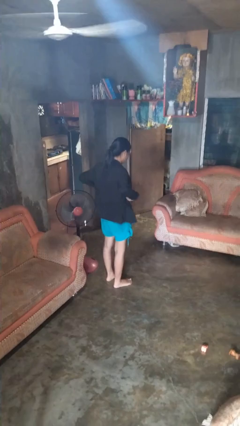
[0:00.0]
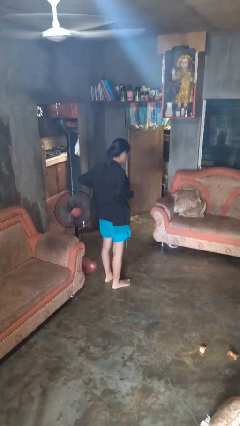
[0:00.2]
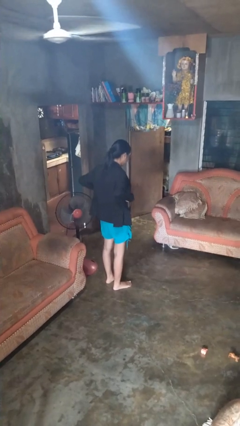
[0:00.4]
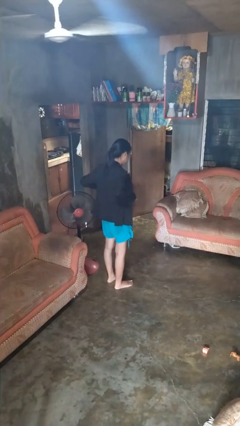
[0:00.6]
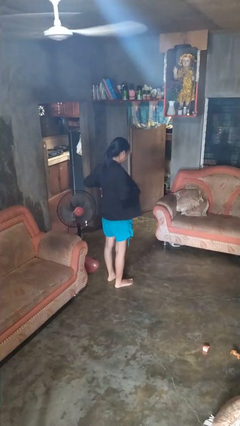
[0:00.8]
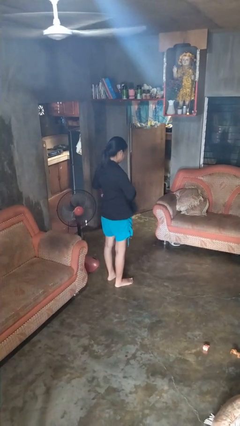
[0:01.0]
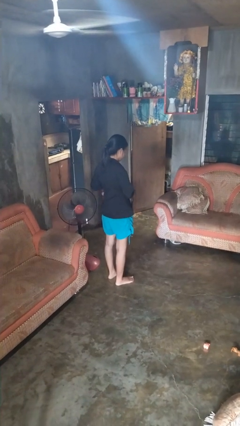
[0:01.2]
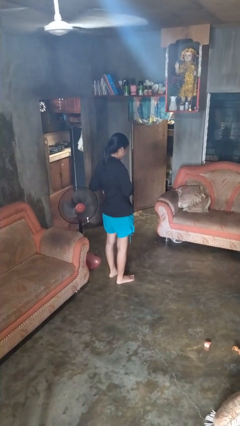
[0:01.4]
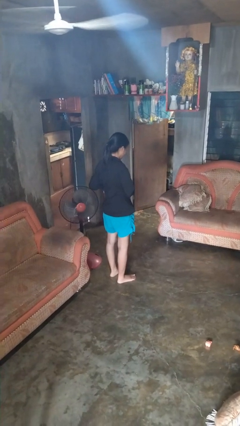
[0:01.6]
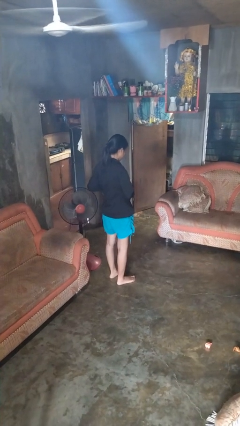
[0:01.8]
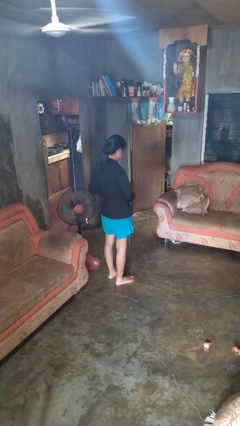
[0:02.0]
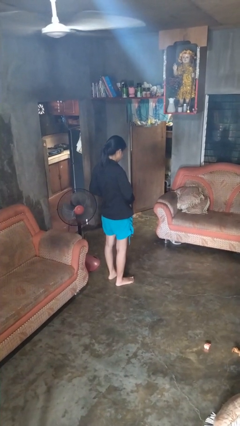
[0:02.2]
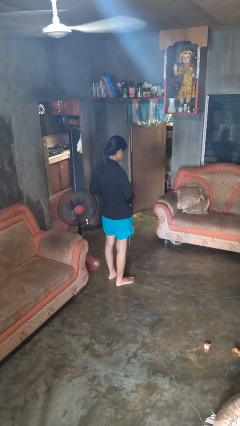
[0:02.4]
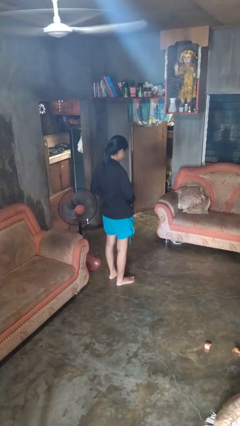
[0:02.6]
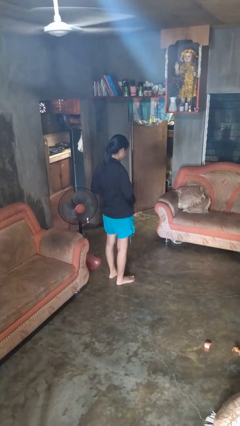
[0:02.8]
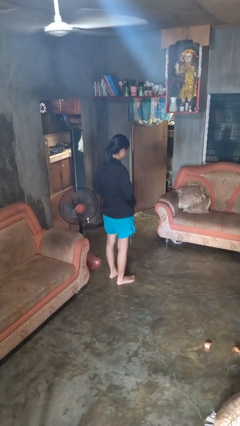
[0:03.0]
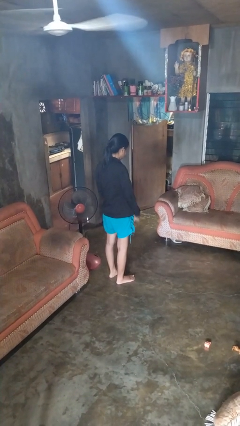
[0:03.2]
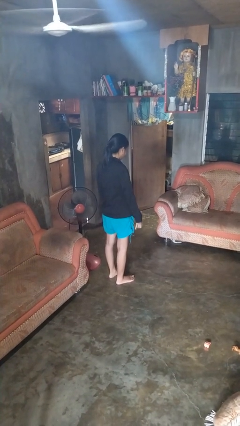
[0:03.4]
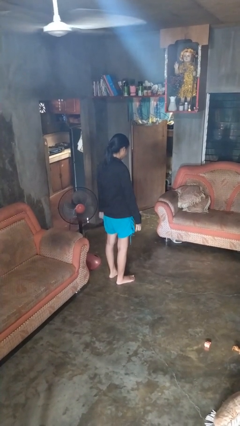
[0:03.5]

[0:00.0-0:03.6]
person buttons shirt

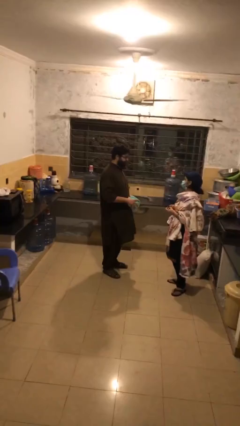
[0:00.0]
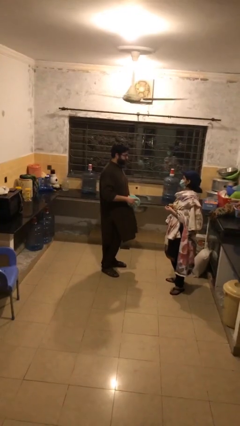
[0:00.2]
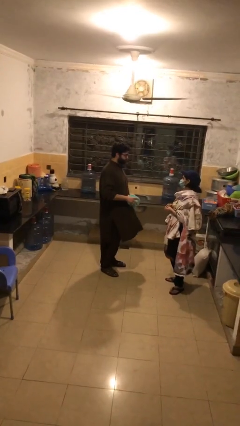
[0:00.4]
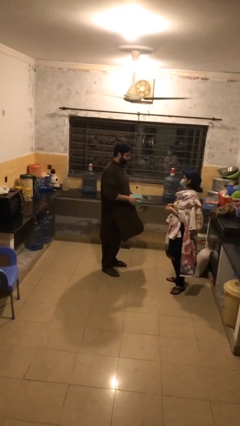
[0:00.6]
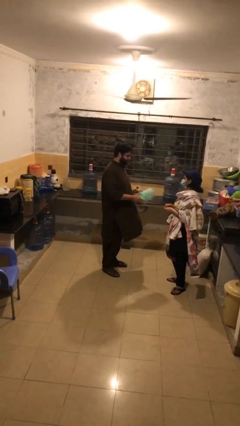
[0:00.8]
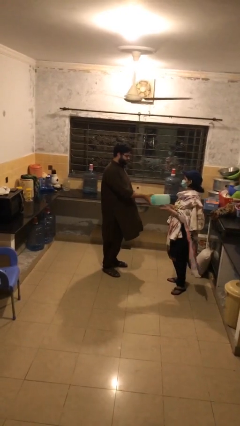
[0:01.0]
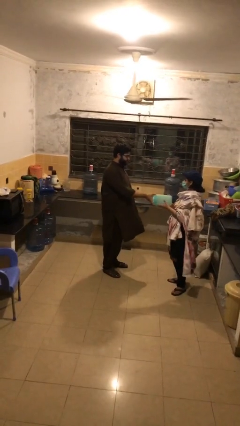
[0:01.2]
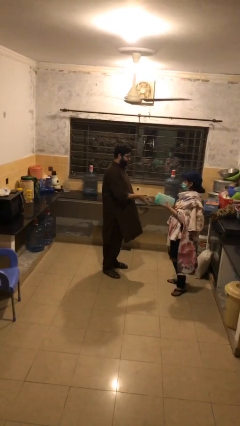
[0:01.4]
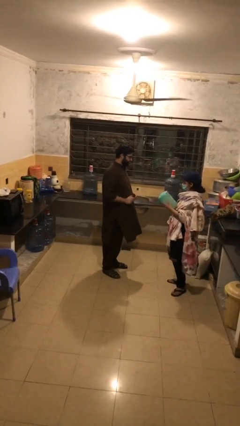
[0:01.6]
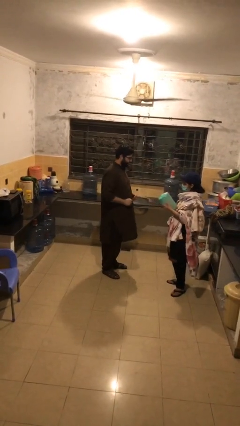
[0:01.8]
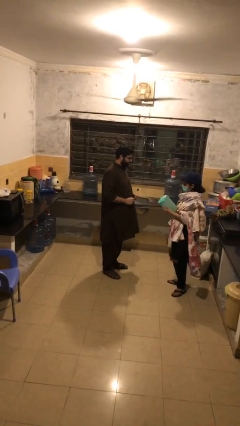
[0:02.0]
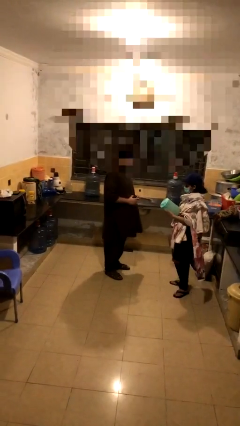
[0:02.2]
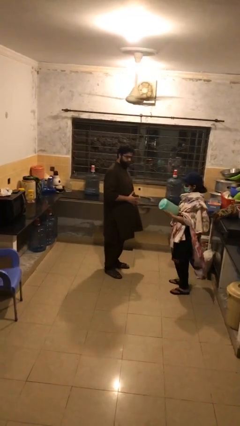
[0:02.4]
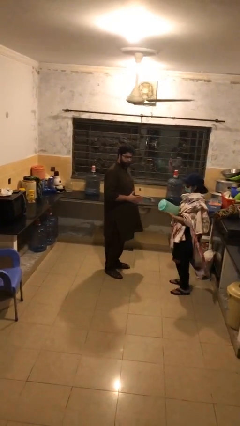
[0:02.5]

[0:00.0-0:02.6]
person transfers object to person

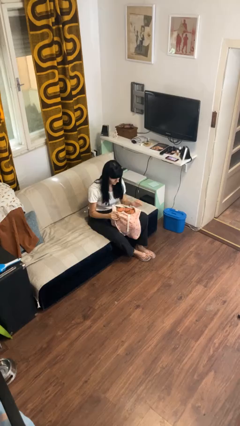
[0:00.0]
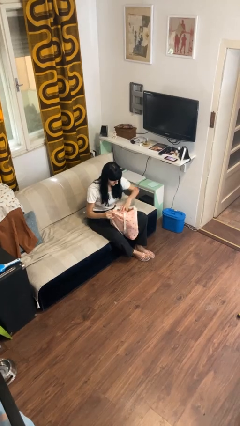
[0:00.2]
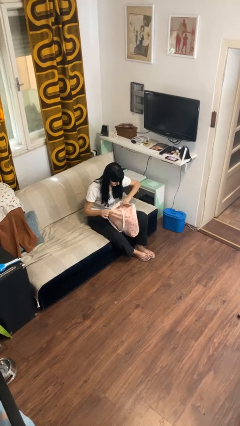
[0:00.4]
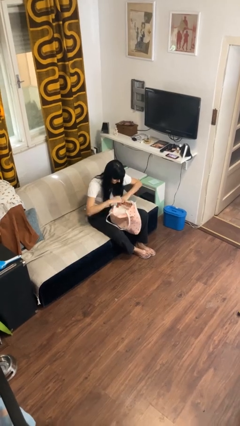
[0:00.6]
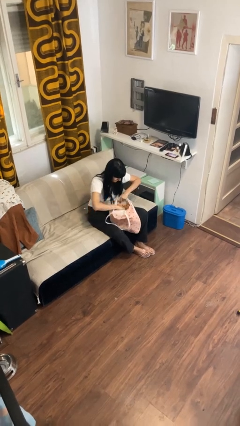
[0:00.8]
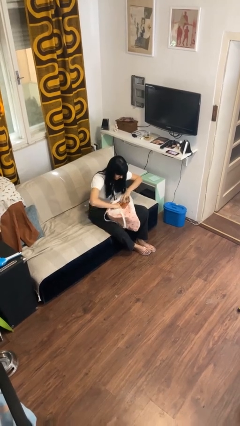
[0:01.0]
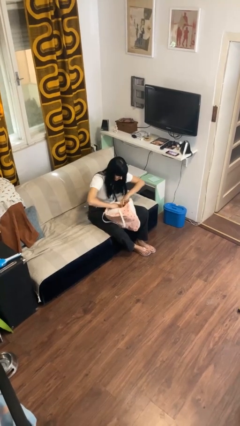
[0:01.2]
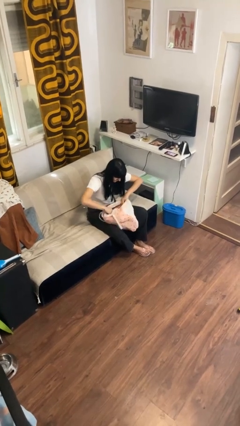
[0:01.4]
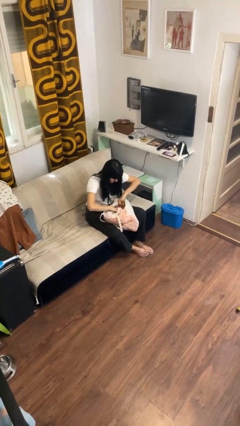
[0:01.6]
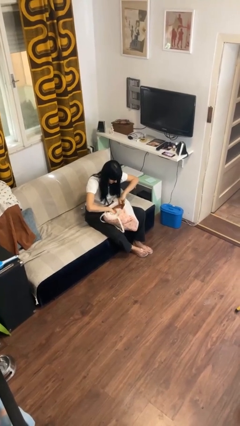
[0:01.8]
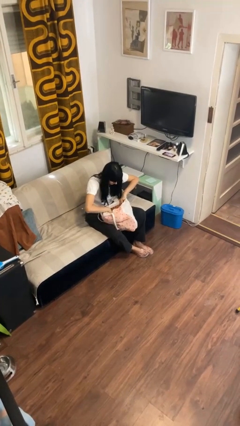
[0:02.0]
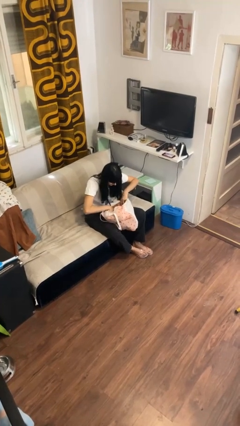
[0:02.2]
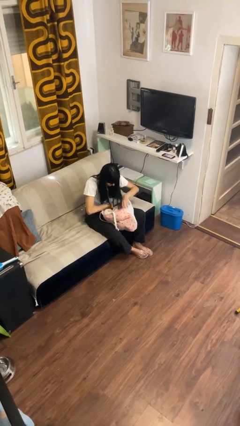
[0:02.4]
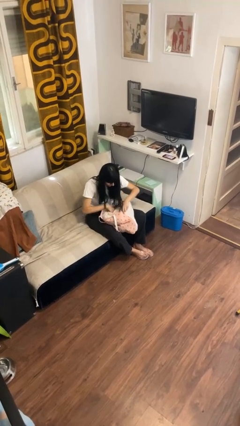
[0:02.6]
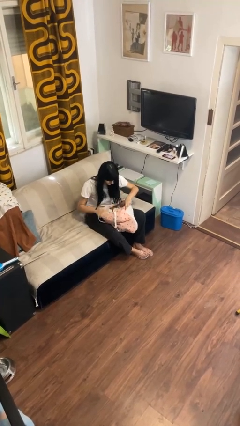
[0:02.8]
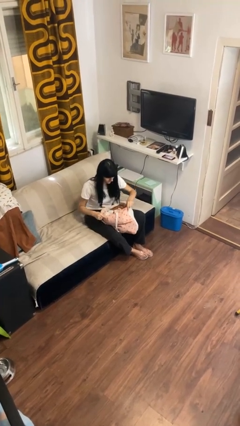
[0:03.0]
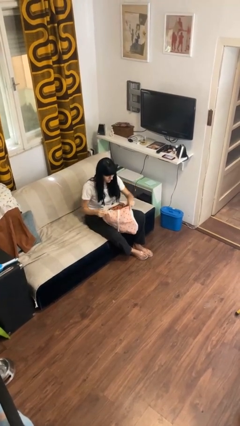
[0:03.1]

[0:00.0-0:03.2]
person searches in bag

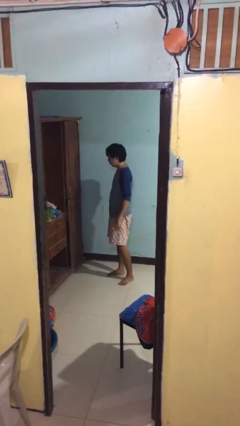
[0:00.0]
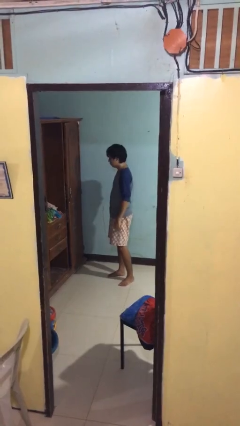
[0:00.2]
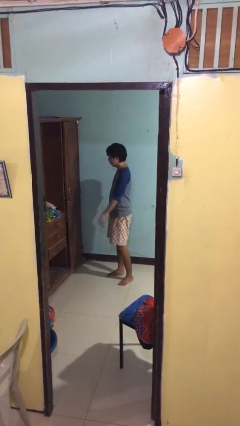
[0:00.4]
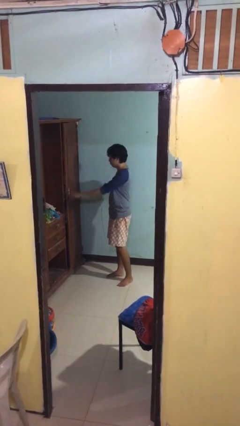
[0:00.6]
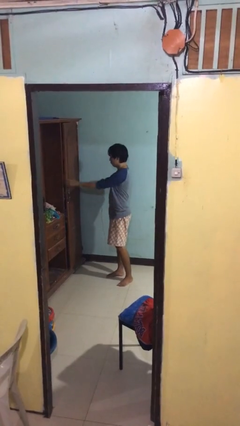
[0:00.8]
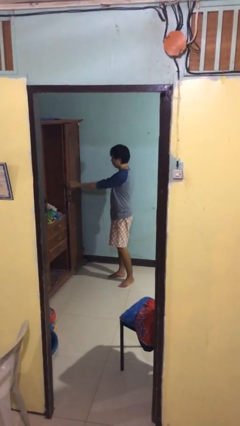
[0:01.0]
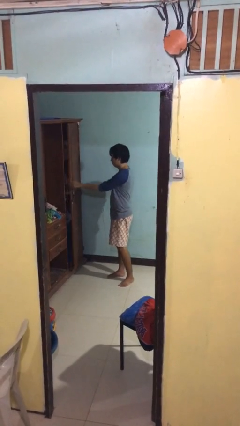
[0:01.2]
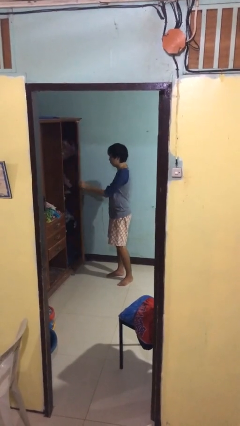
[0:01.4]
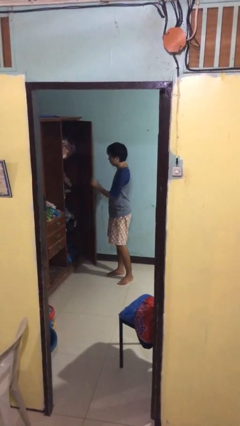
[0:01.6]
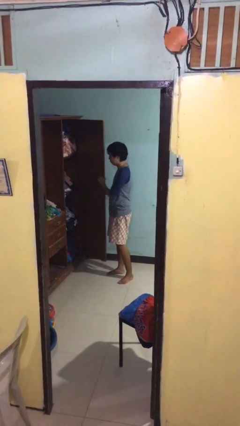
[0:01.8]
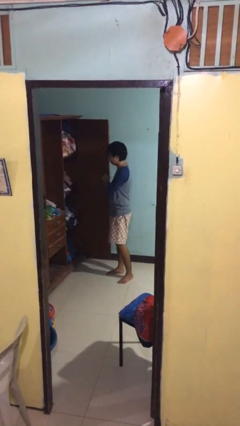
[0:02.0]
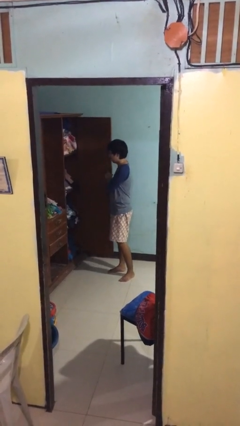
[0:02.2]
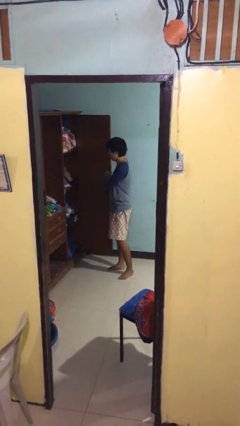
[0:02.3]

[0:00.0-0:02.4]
person opens closet door

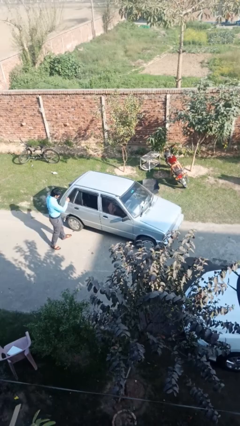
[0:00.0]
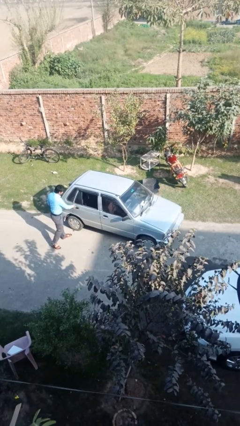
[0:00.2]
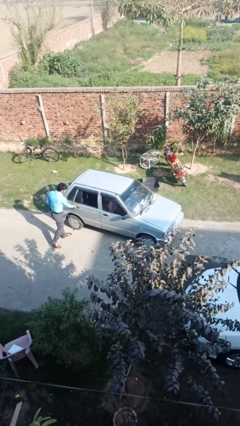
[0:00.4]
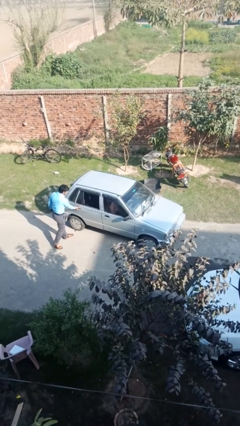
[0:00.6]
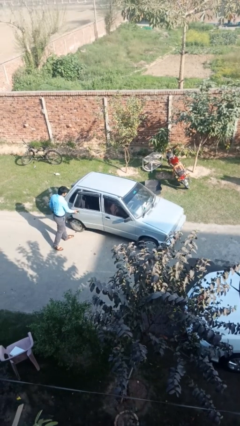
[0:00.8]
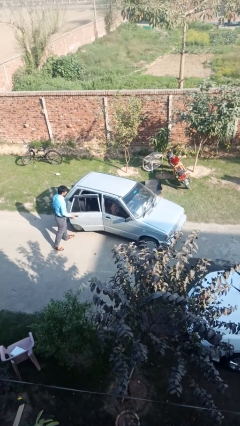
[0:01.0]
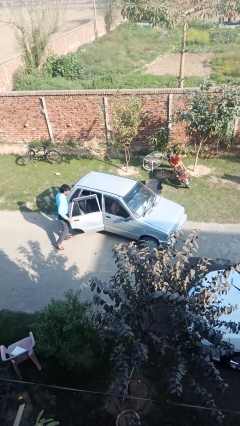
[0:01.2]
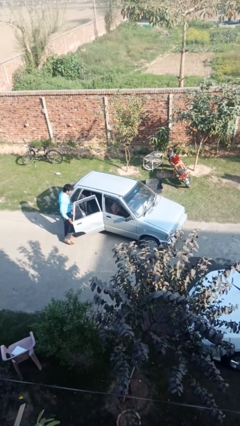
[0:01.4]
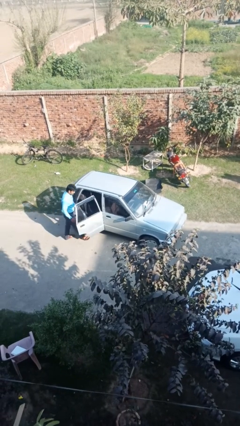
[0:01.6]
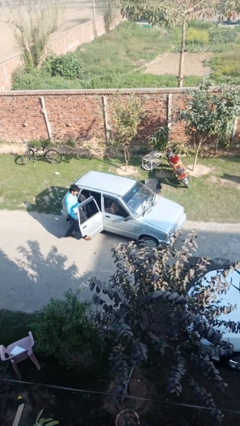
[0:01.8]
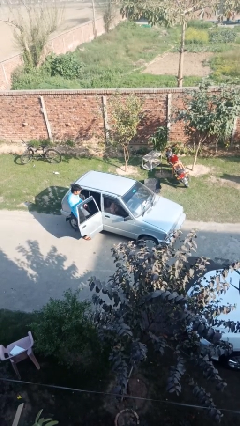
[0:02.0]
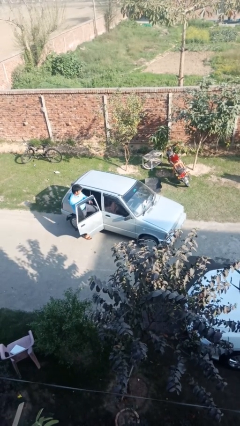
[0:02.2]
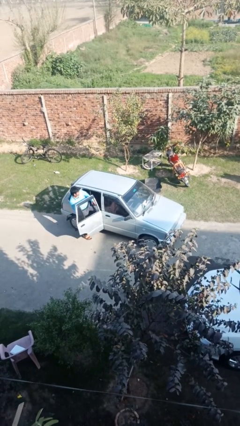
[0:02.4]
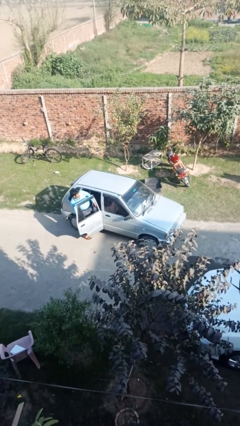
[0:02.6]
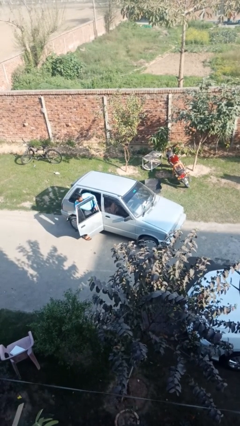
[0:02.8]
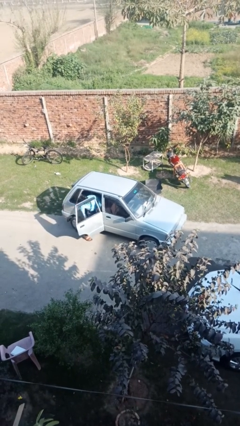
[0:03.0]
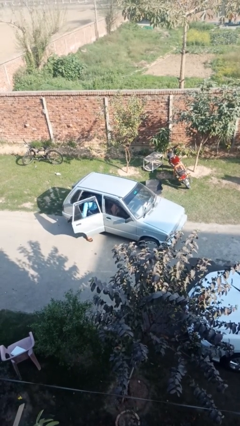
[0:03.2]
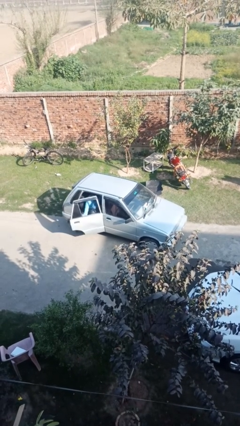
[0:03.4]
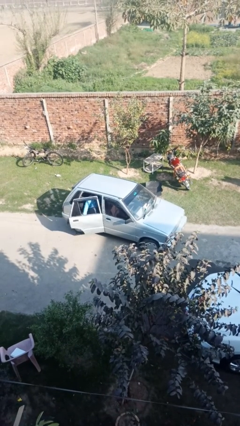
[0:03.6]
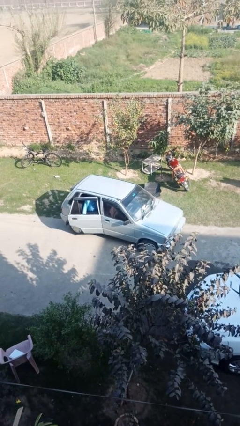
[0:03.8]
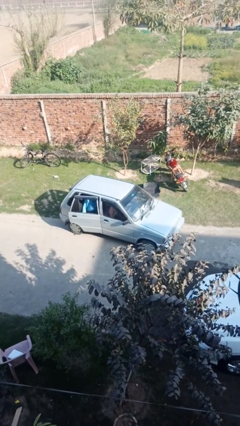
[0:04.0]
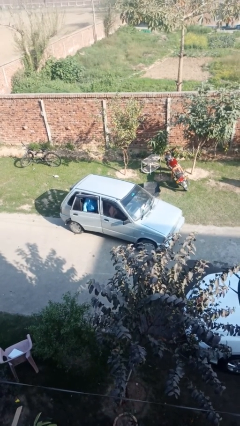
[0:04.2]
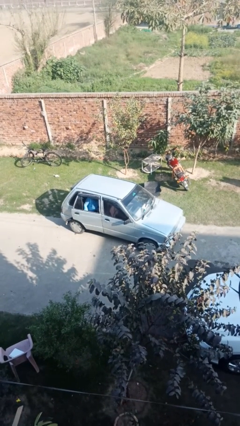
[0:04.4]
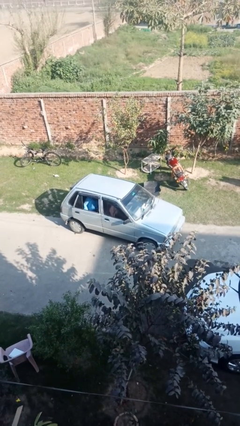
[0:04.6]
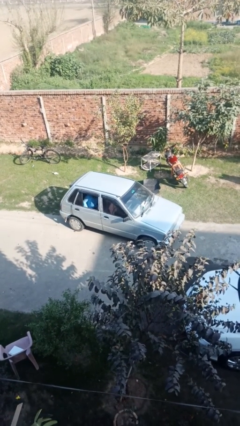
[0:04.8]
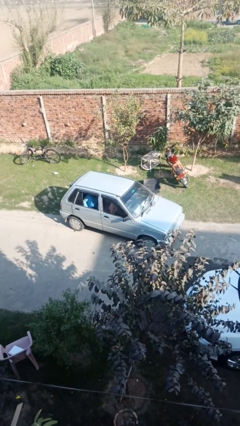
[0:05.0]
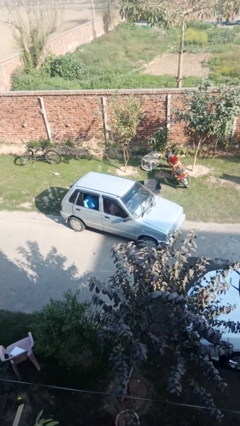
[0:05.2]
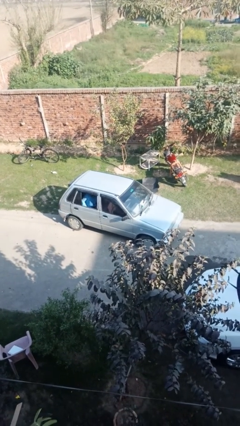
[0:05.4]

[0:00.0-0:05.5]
car picks up person

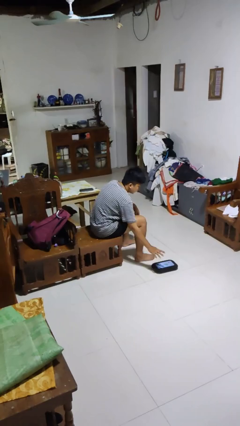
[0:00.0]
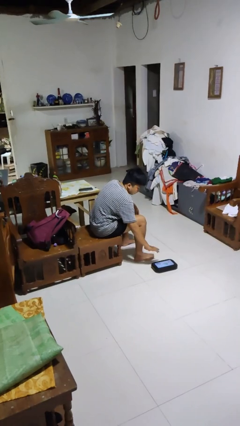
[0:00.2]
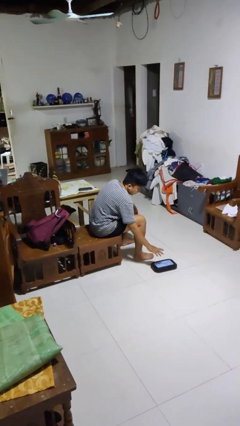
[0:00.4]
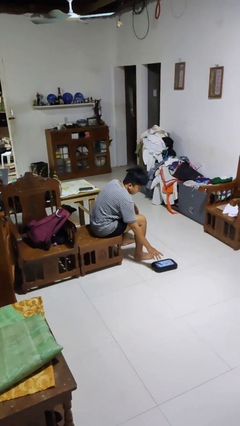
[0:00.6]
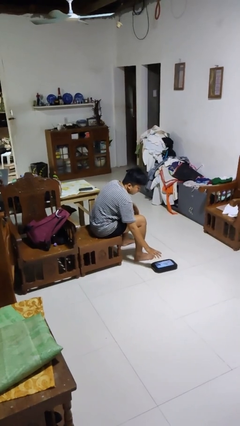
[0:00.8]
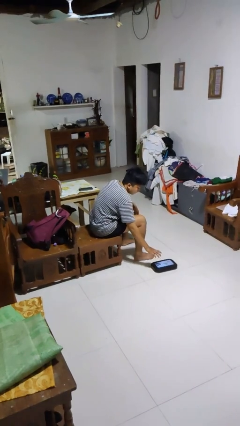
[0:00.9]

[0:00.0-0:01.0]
person waves hand over object
